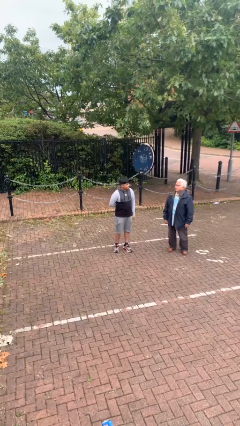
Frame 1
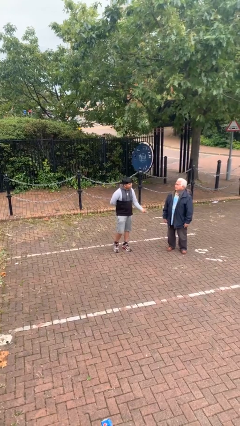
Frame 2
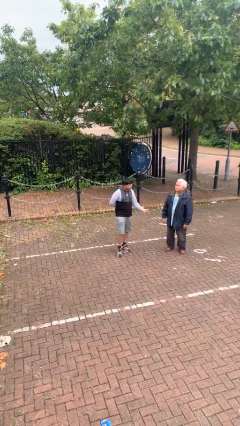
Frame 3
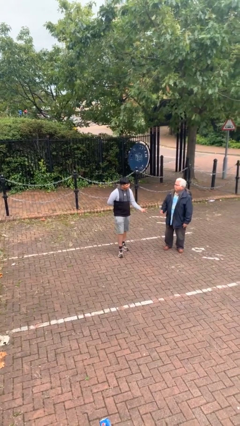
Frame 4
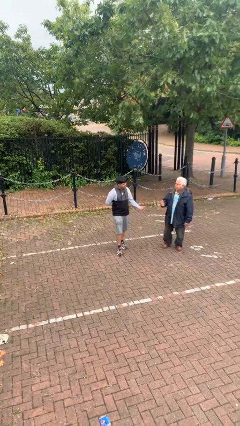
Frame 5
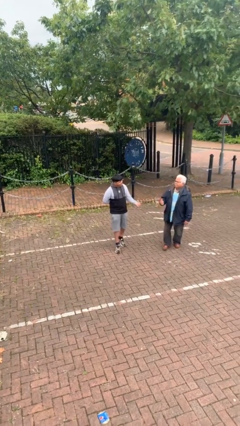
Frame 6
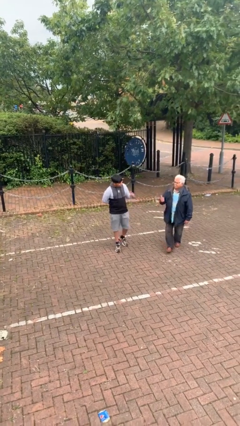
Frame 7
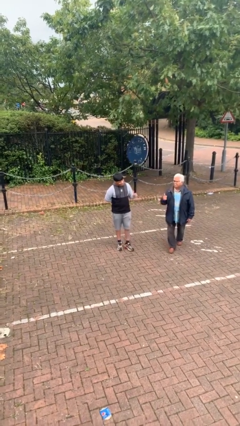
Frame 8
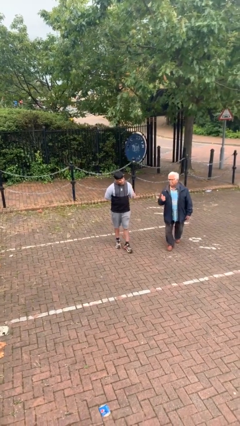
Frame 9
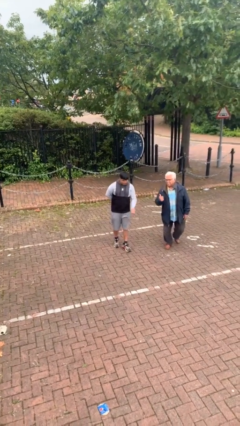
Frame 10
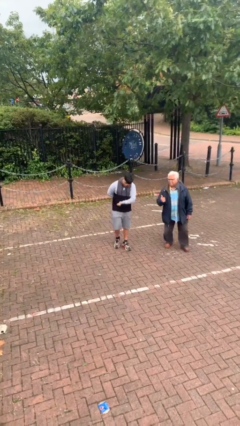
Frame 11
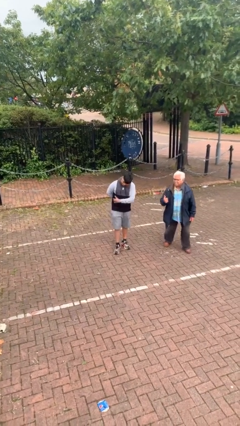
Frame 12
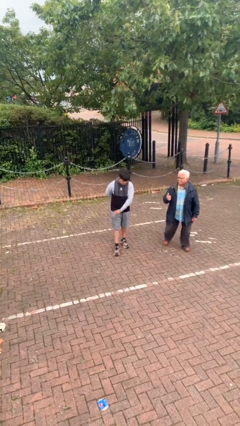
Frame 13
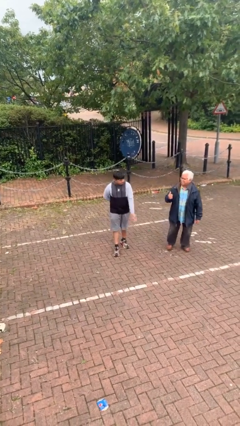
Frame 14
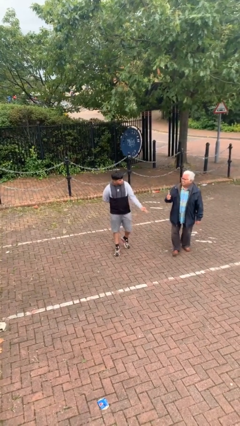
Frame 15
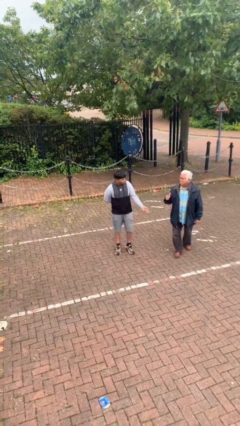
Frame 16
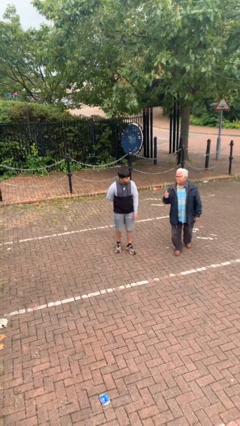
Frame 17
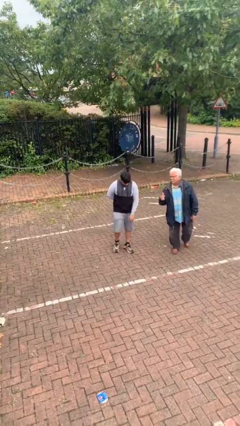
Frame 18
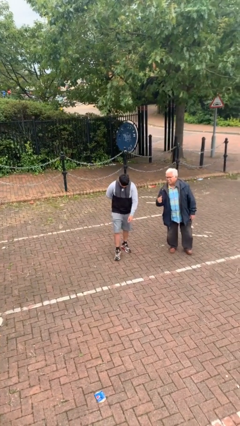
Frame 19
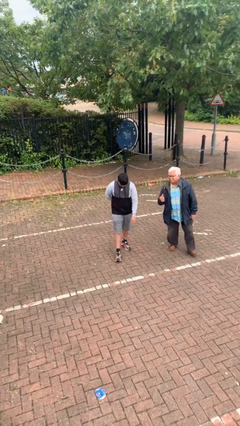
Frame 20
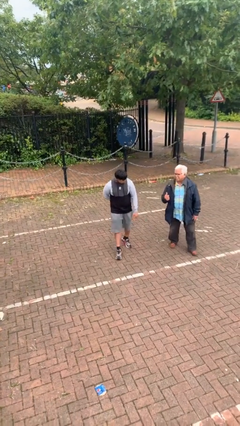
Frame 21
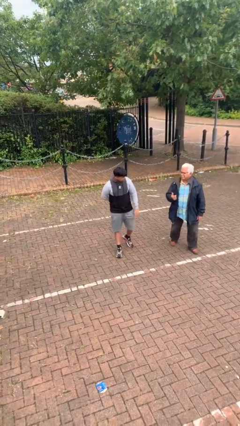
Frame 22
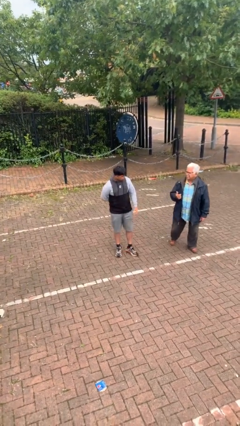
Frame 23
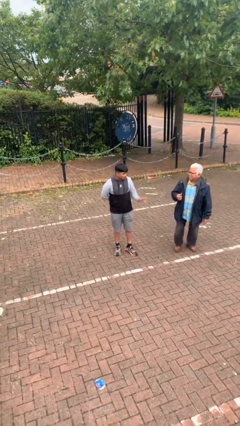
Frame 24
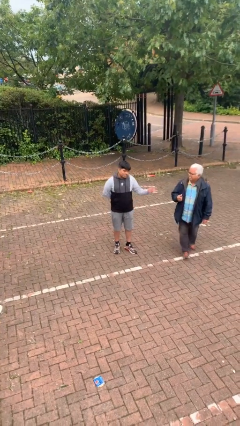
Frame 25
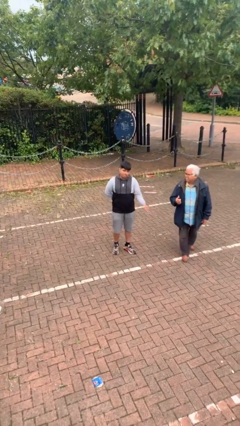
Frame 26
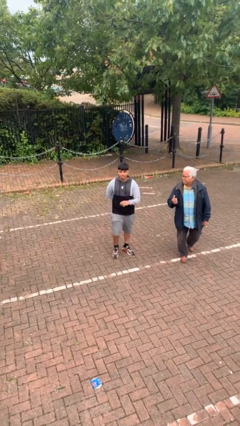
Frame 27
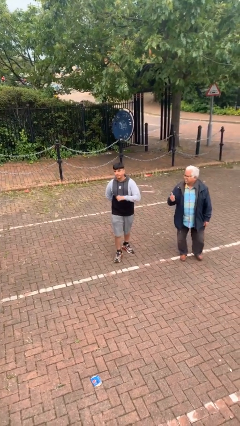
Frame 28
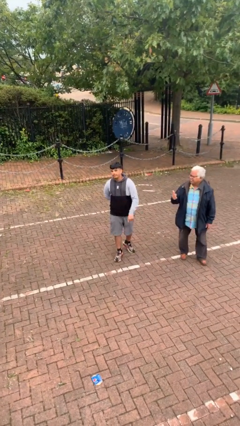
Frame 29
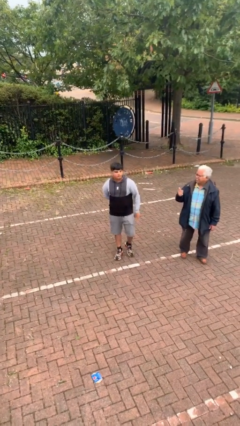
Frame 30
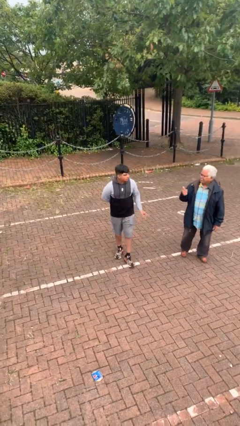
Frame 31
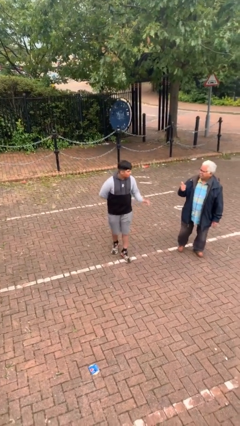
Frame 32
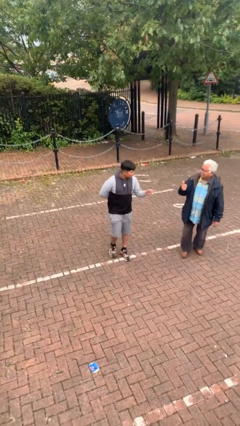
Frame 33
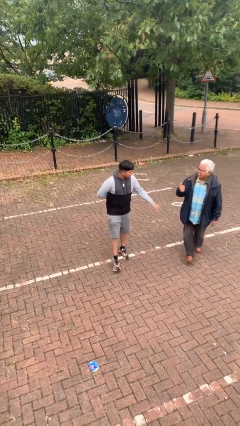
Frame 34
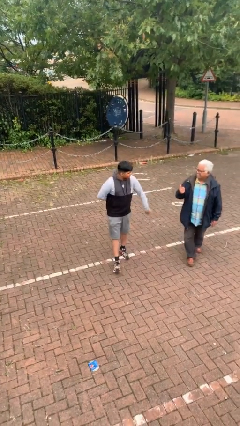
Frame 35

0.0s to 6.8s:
person talks to person

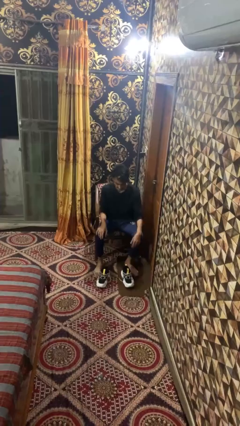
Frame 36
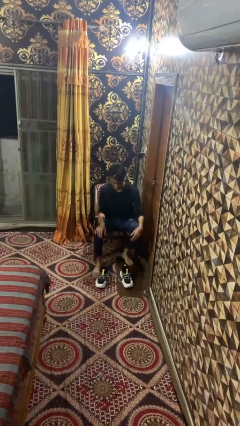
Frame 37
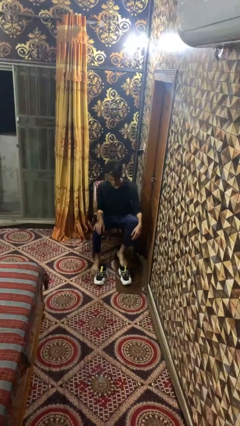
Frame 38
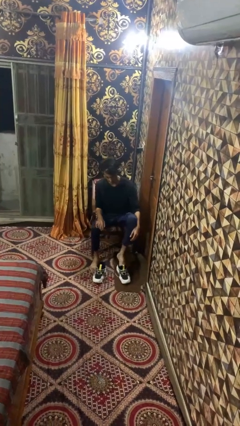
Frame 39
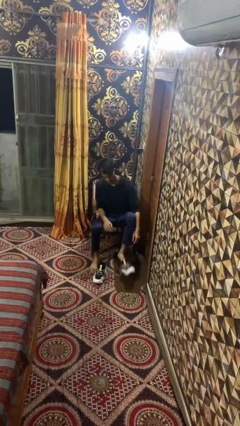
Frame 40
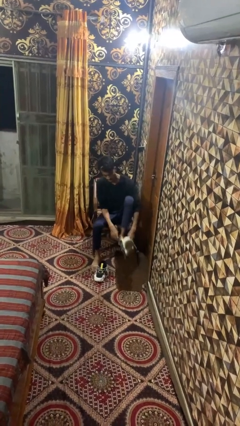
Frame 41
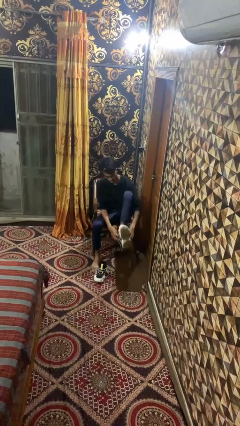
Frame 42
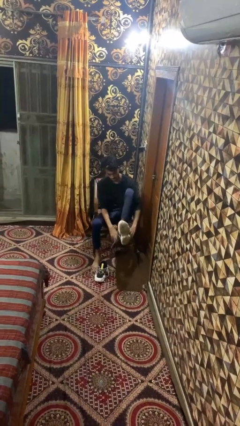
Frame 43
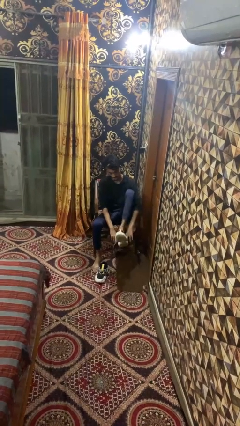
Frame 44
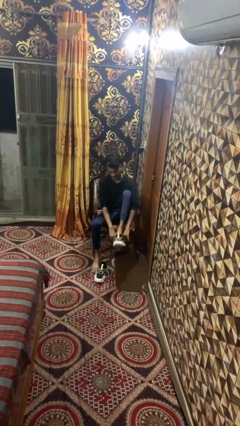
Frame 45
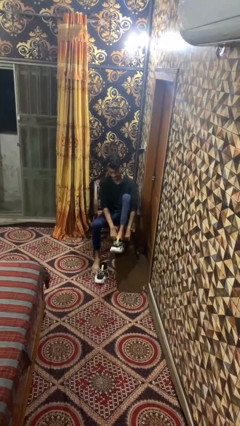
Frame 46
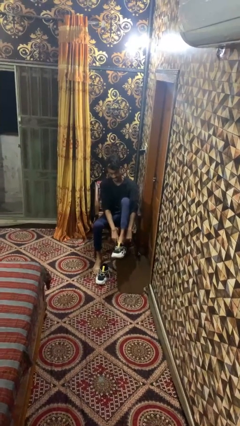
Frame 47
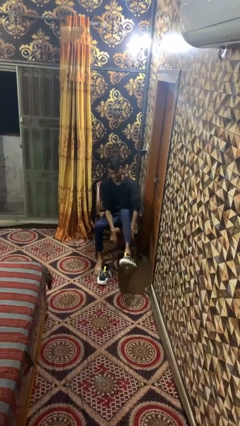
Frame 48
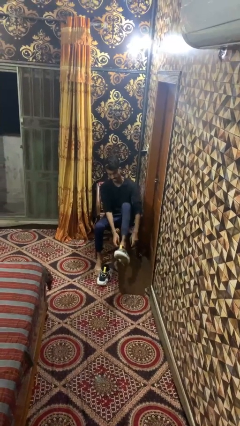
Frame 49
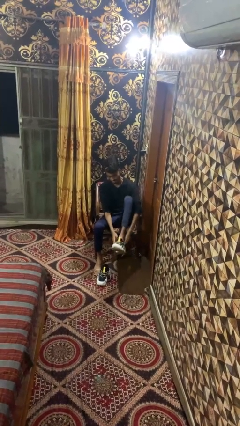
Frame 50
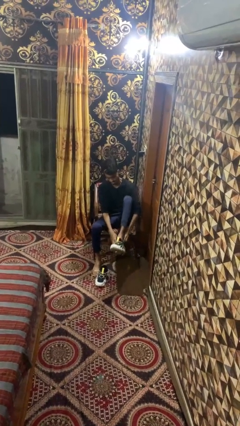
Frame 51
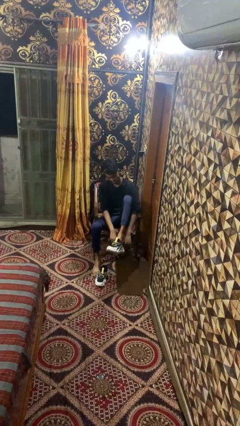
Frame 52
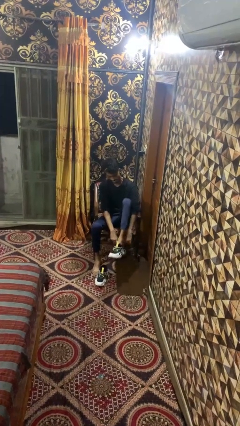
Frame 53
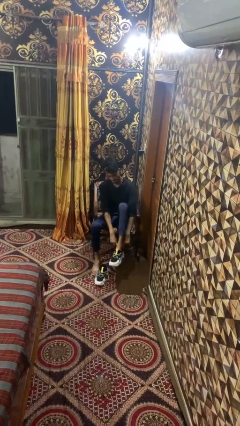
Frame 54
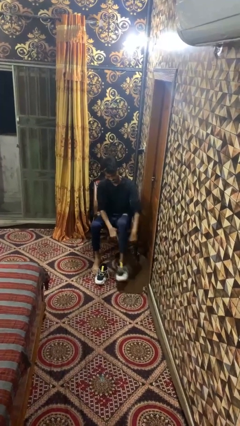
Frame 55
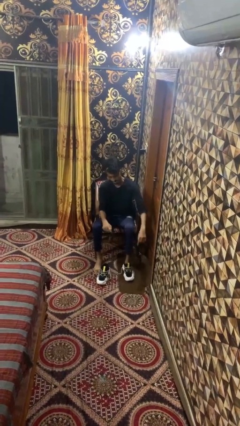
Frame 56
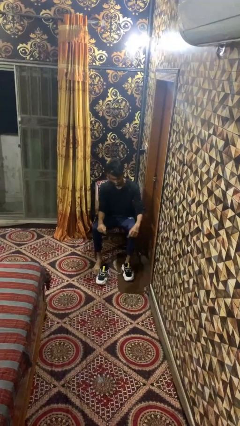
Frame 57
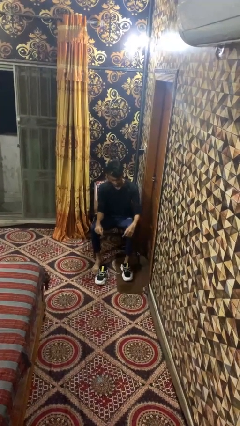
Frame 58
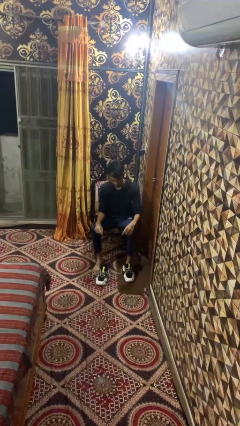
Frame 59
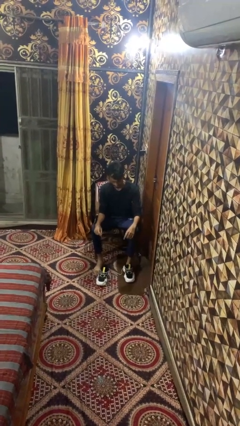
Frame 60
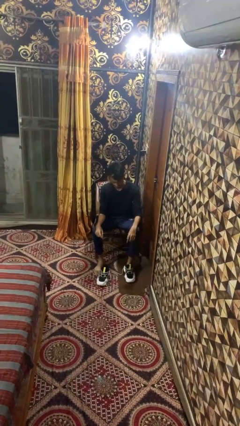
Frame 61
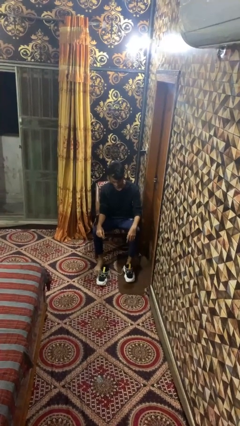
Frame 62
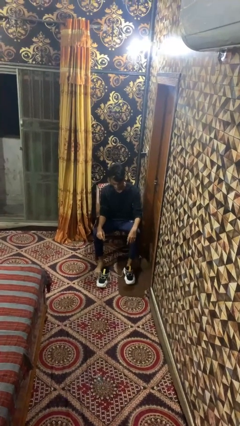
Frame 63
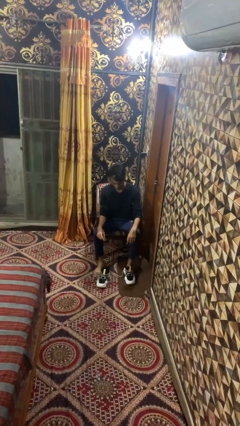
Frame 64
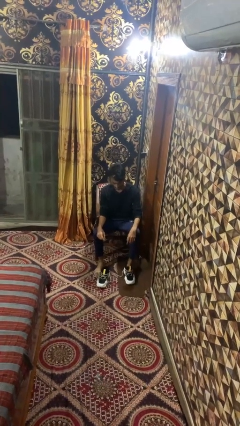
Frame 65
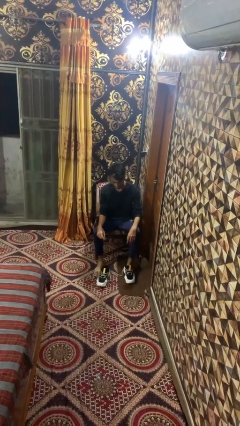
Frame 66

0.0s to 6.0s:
person puts on shoes

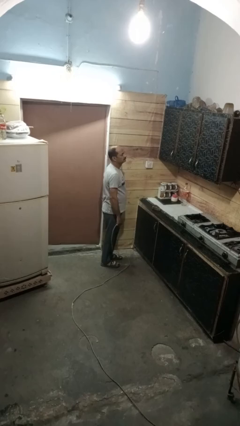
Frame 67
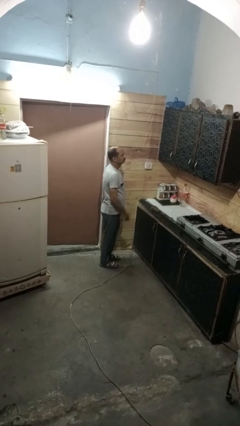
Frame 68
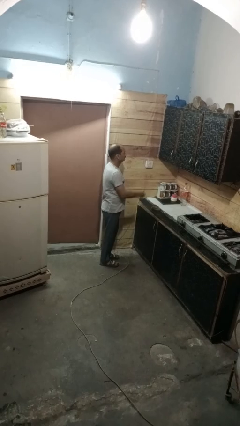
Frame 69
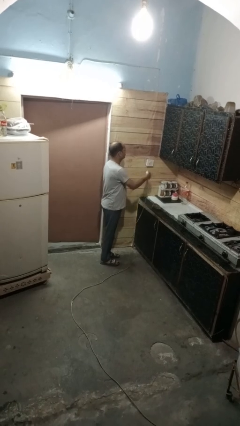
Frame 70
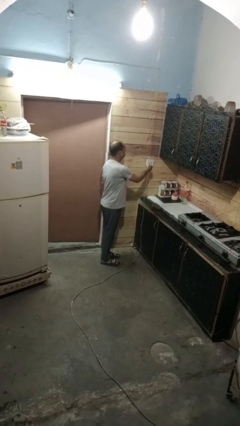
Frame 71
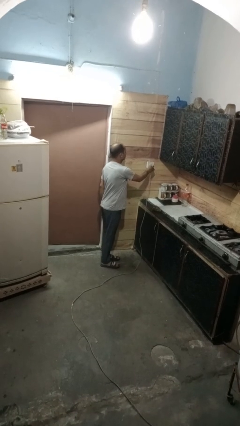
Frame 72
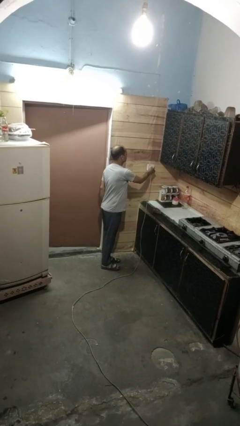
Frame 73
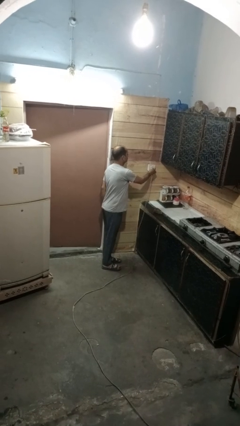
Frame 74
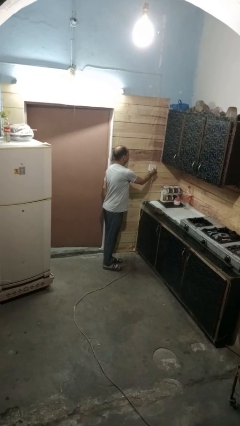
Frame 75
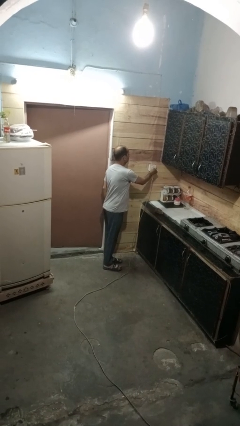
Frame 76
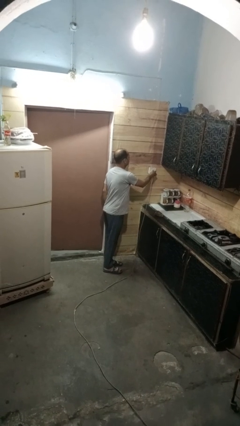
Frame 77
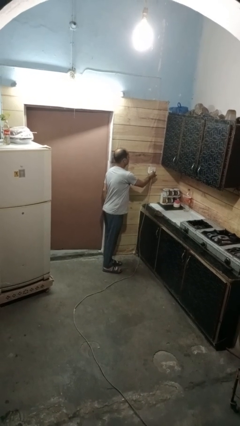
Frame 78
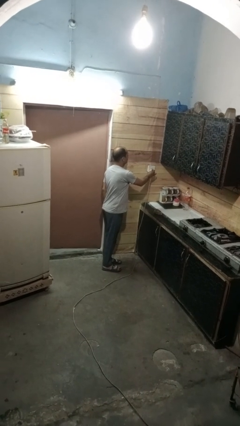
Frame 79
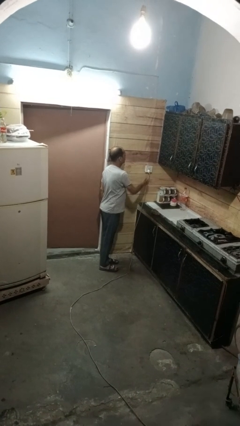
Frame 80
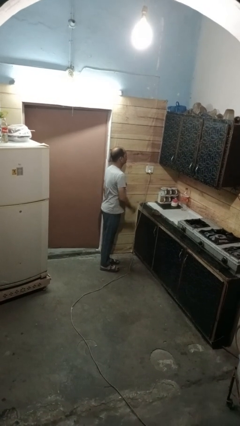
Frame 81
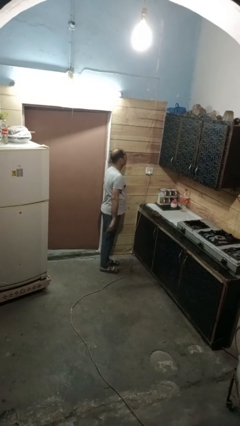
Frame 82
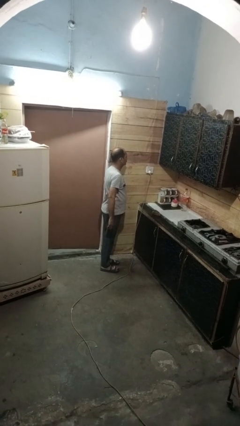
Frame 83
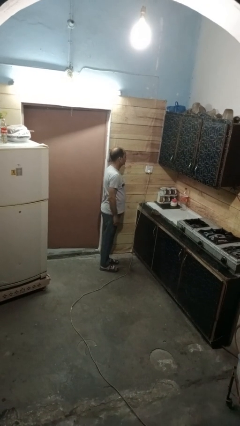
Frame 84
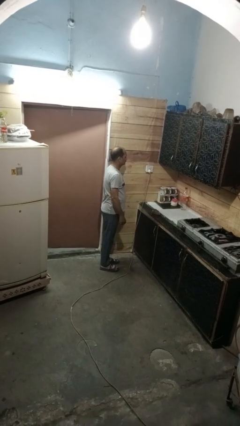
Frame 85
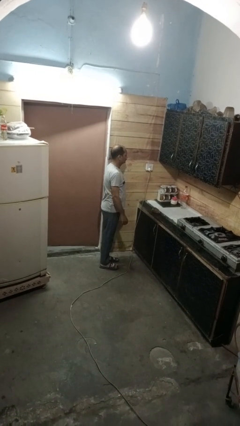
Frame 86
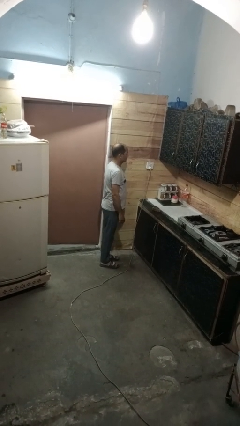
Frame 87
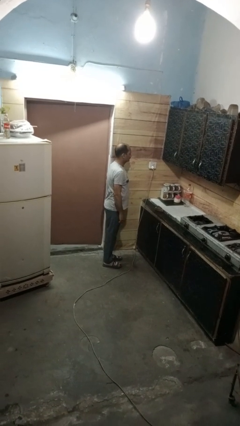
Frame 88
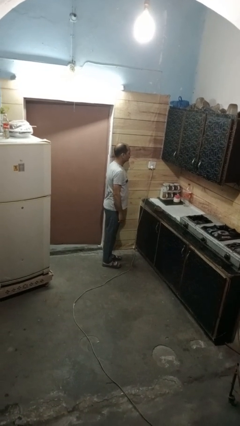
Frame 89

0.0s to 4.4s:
person plugs into electrical socket

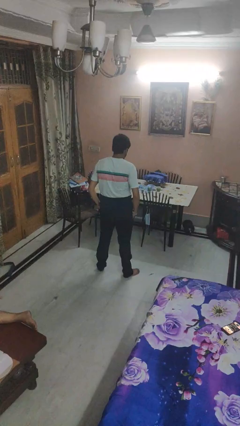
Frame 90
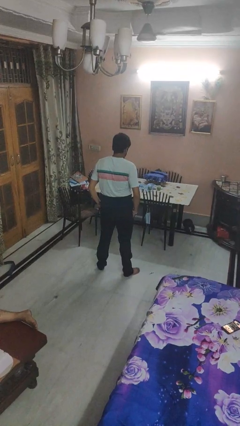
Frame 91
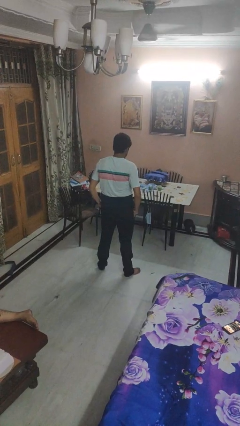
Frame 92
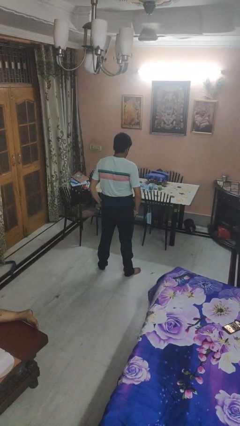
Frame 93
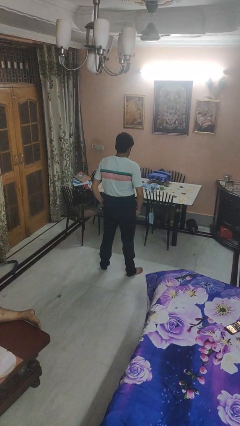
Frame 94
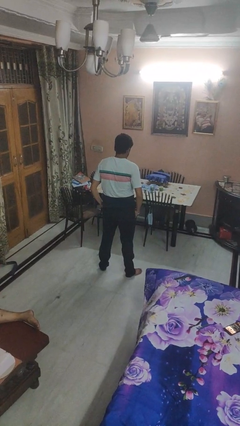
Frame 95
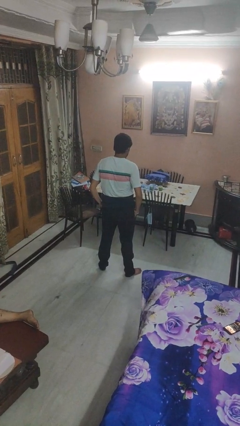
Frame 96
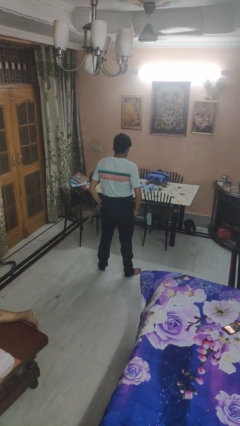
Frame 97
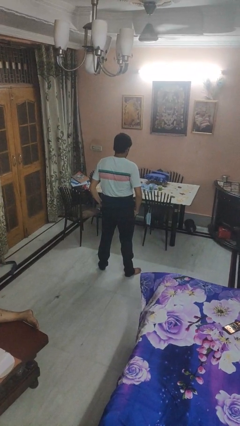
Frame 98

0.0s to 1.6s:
person puts hands in back pockets
